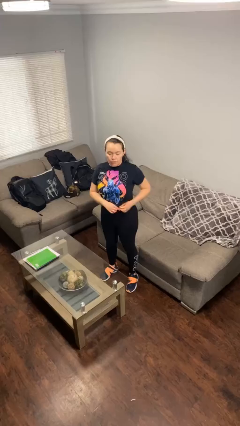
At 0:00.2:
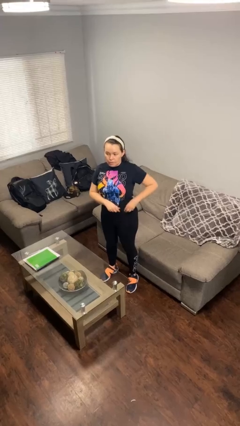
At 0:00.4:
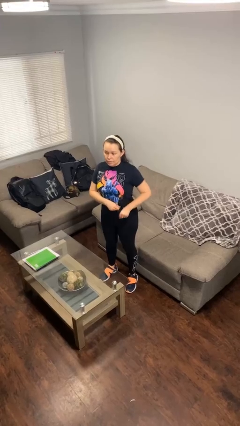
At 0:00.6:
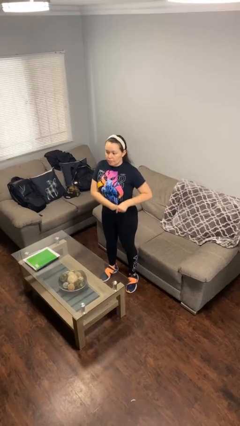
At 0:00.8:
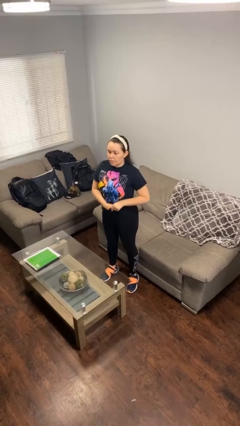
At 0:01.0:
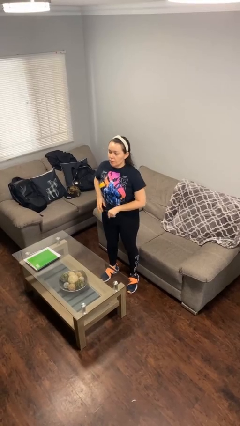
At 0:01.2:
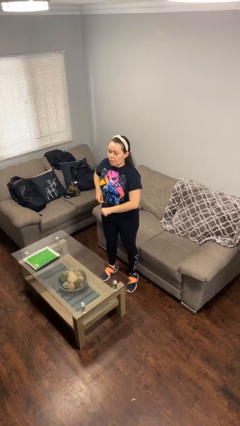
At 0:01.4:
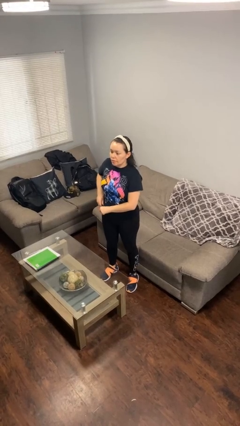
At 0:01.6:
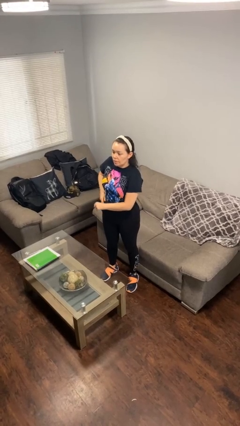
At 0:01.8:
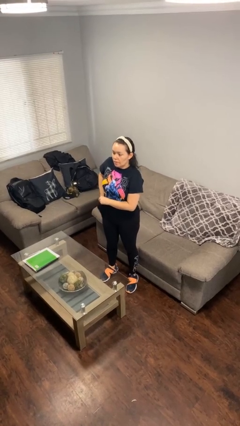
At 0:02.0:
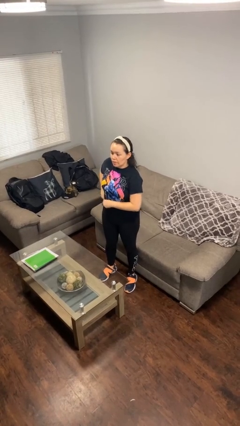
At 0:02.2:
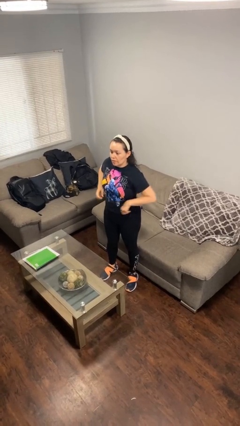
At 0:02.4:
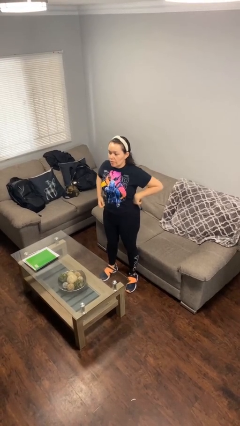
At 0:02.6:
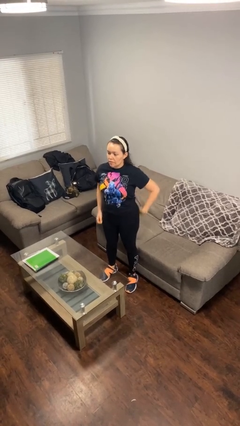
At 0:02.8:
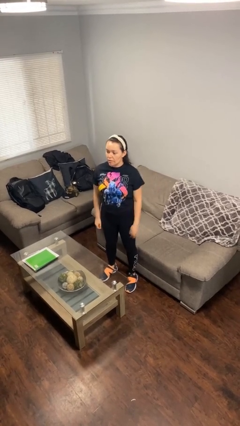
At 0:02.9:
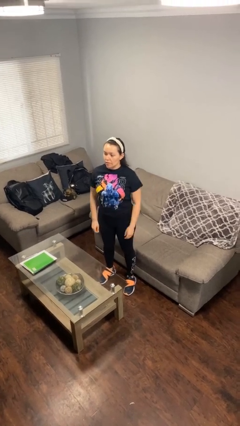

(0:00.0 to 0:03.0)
person tucks in shirt

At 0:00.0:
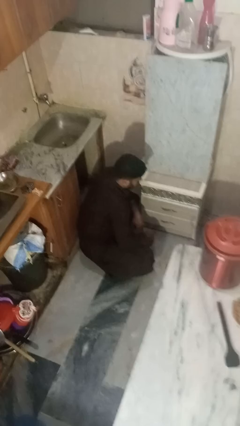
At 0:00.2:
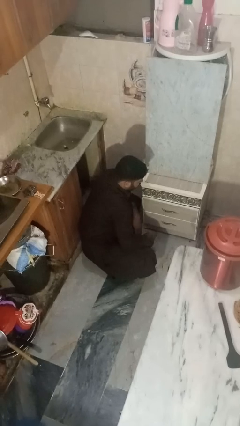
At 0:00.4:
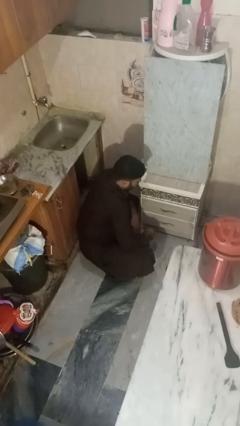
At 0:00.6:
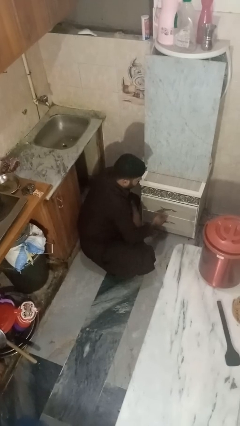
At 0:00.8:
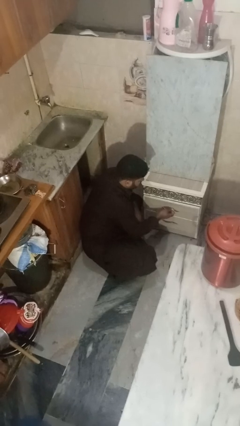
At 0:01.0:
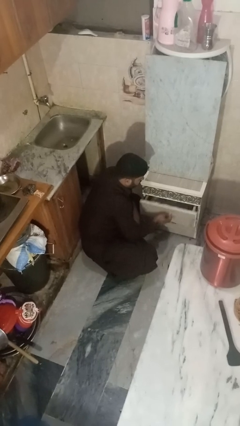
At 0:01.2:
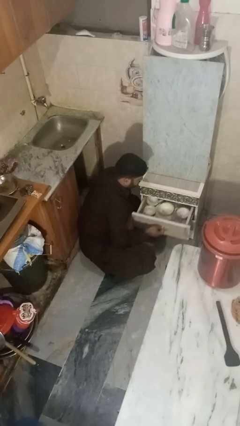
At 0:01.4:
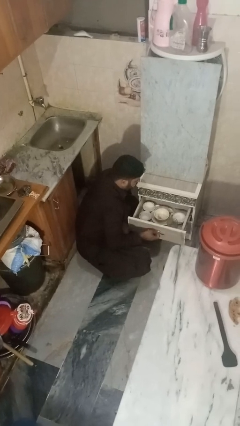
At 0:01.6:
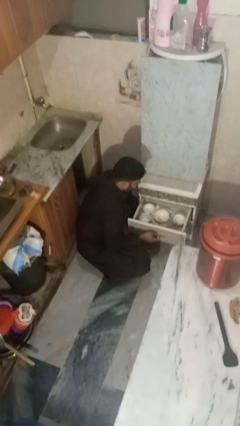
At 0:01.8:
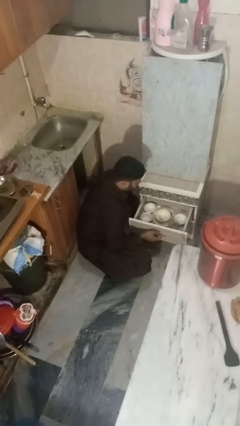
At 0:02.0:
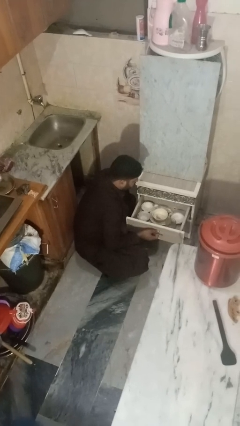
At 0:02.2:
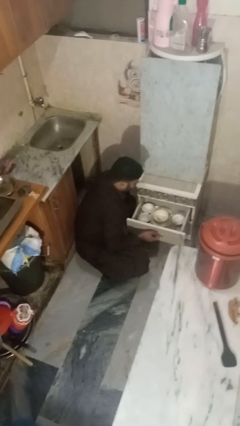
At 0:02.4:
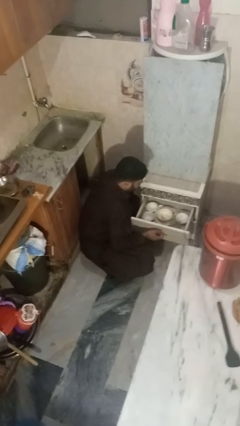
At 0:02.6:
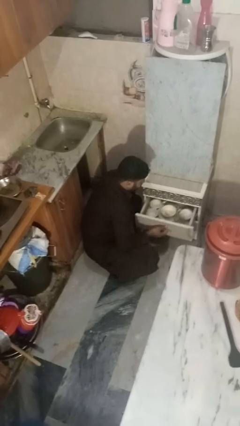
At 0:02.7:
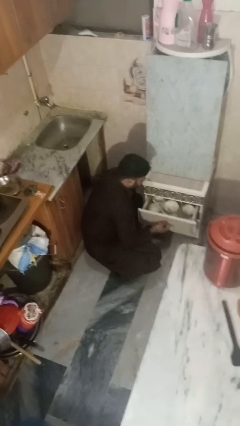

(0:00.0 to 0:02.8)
person opens kitchen drawer

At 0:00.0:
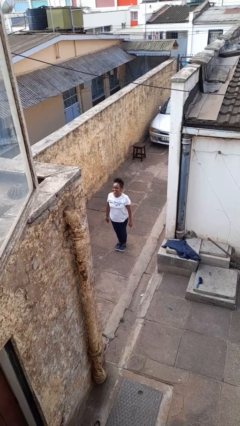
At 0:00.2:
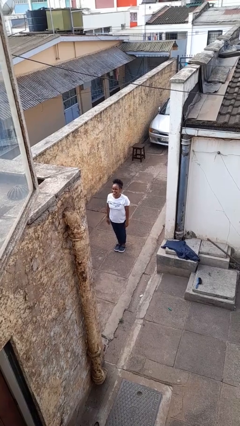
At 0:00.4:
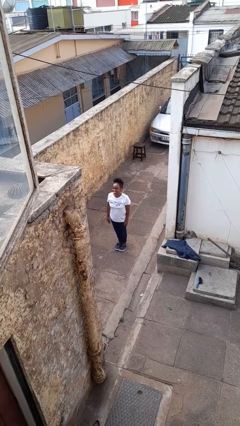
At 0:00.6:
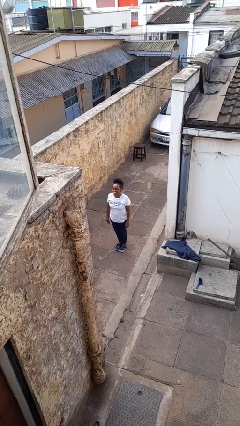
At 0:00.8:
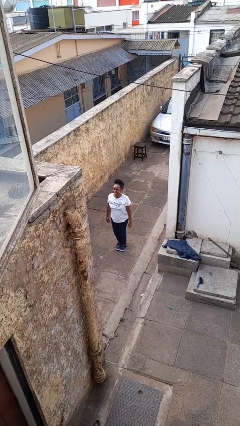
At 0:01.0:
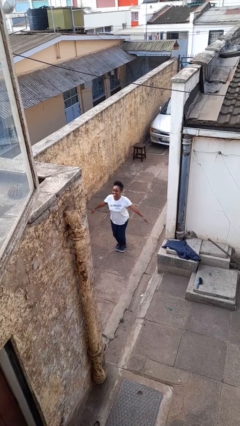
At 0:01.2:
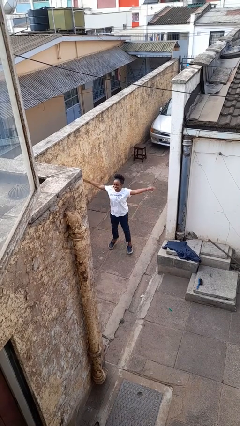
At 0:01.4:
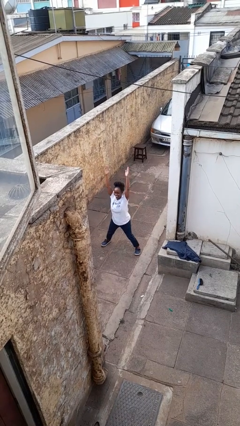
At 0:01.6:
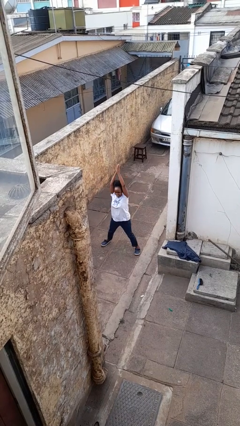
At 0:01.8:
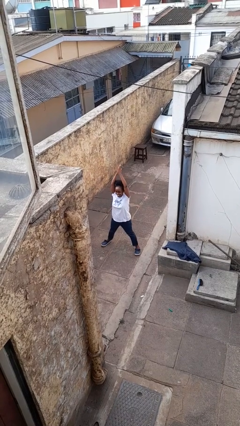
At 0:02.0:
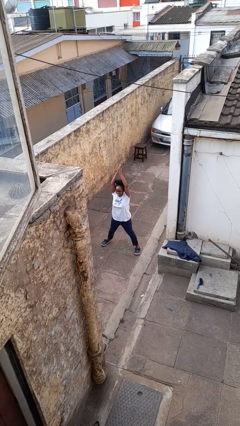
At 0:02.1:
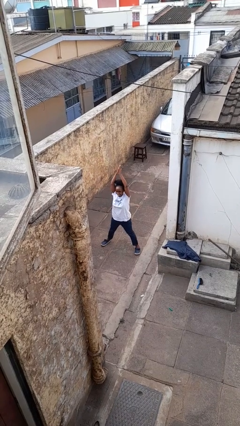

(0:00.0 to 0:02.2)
person exercises with jumping jacks

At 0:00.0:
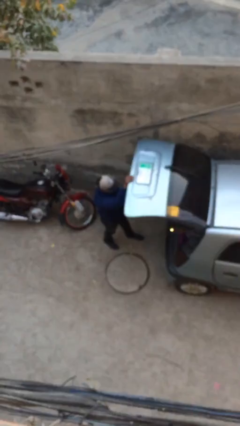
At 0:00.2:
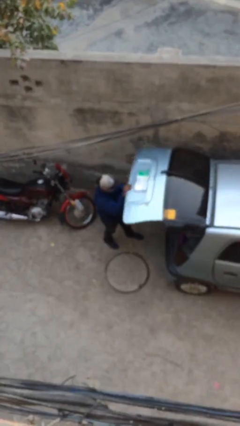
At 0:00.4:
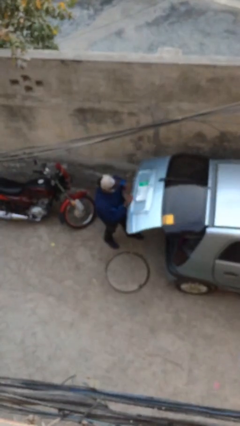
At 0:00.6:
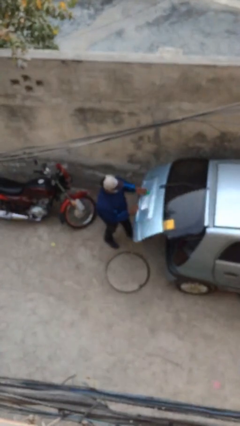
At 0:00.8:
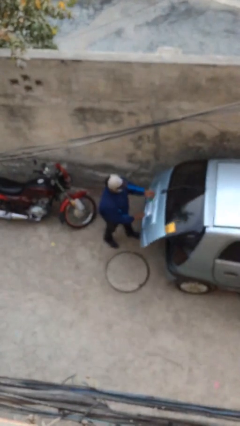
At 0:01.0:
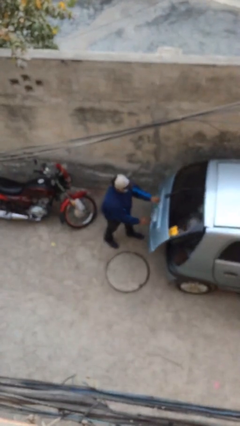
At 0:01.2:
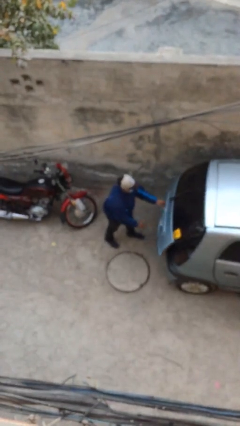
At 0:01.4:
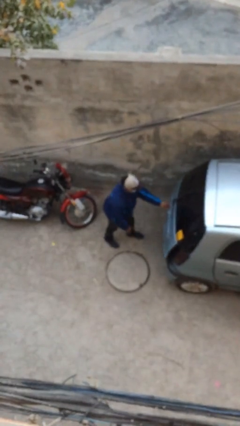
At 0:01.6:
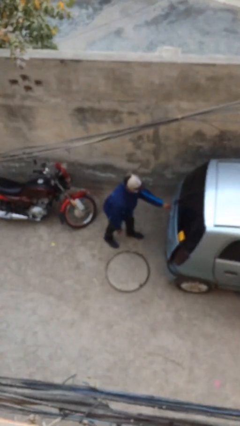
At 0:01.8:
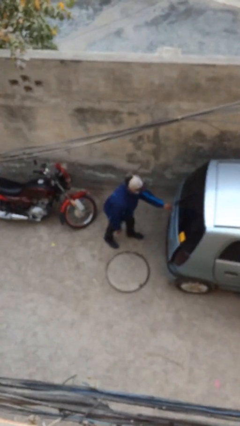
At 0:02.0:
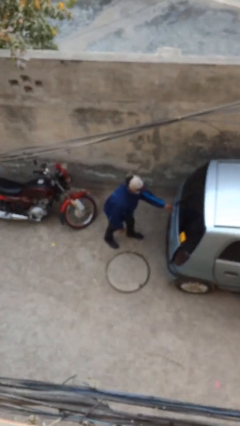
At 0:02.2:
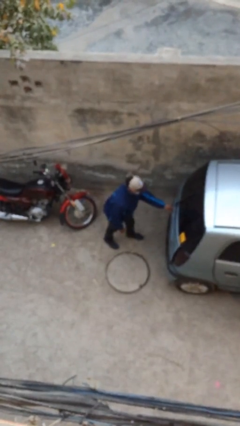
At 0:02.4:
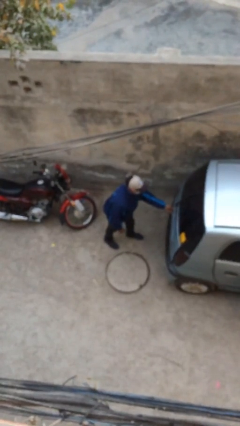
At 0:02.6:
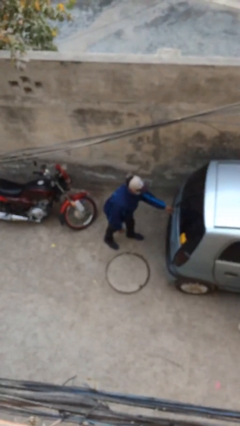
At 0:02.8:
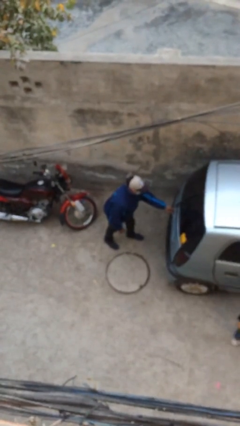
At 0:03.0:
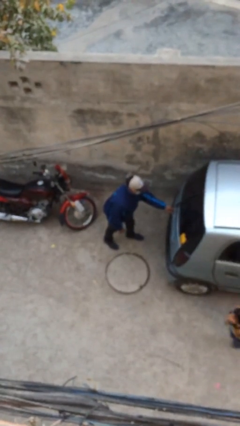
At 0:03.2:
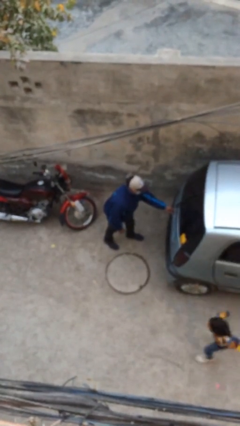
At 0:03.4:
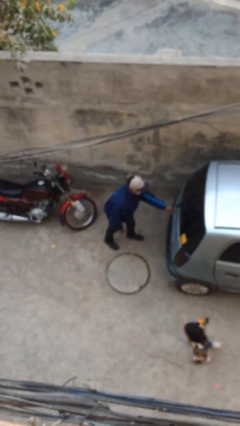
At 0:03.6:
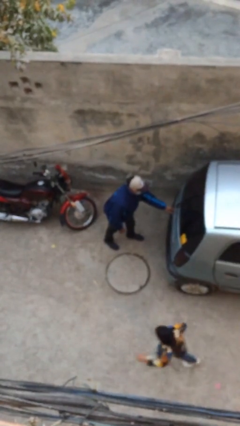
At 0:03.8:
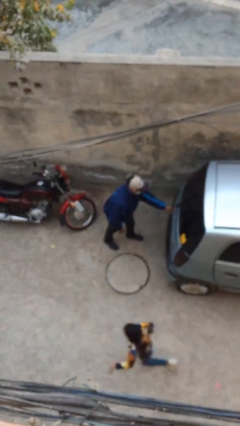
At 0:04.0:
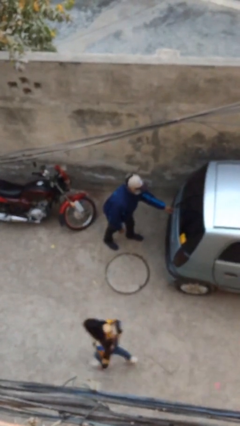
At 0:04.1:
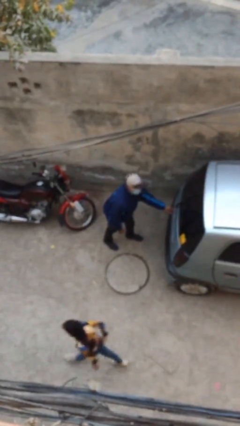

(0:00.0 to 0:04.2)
person closes car trunk

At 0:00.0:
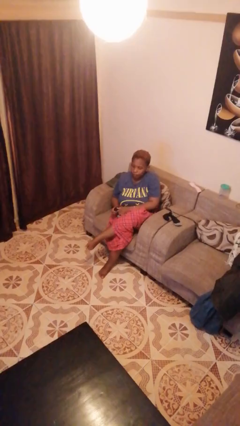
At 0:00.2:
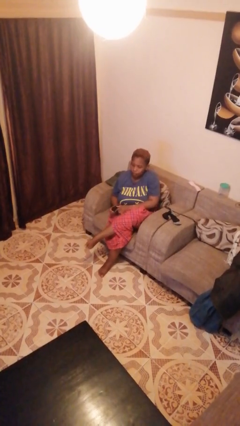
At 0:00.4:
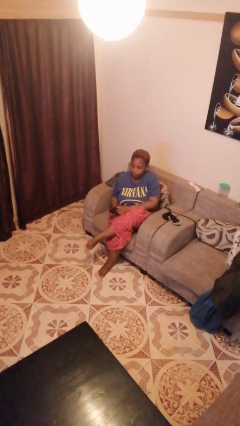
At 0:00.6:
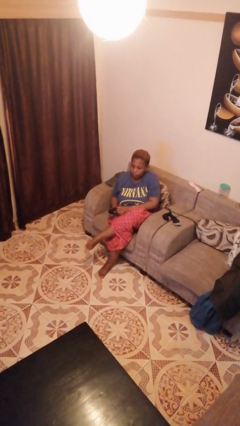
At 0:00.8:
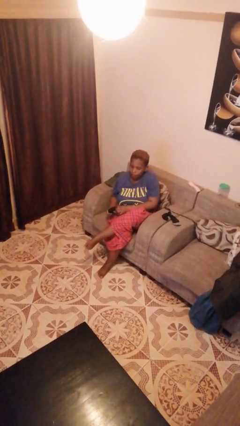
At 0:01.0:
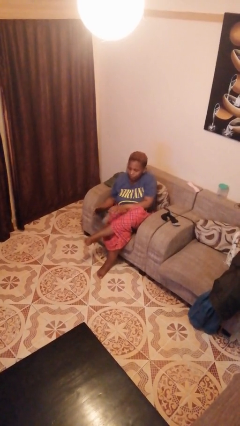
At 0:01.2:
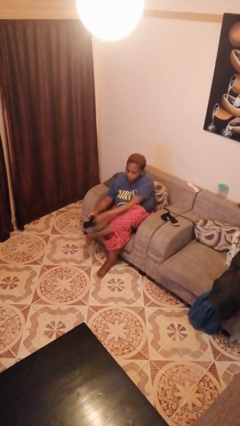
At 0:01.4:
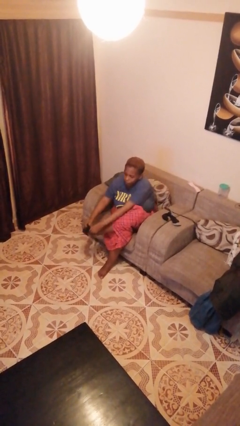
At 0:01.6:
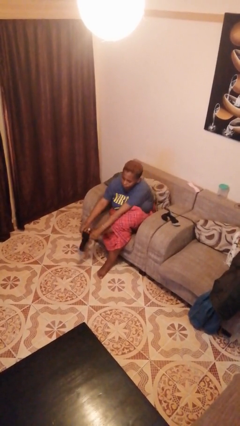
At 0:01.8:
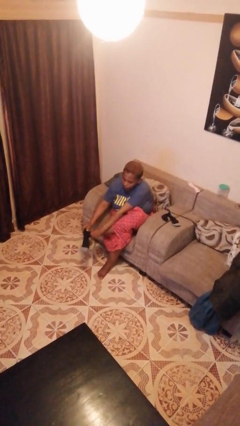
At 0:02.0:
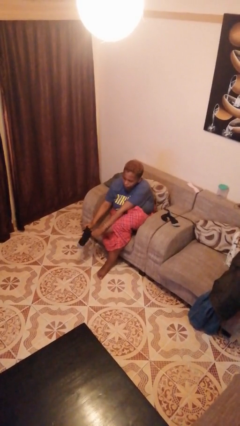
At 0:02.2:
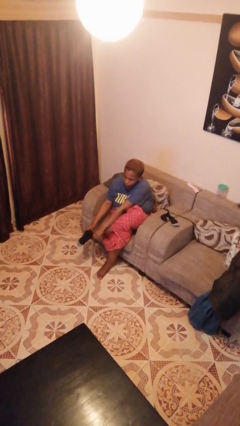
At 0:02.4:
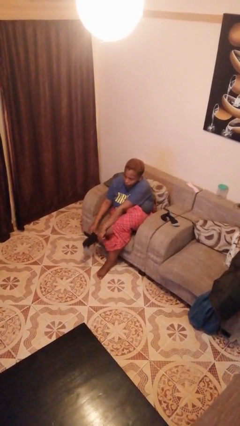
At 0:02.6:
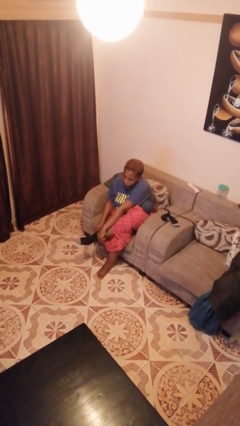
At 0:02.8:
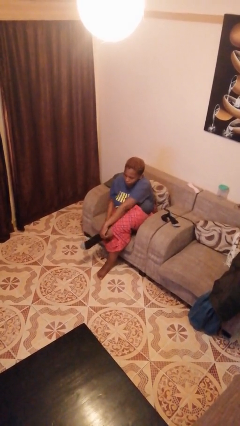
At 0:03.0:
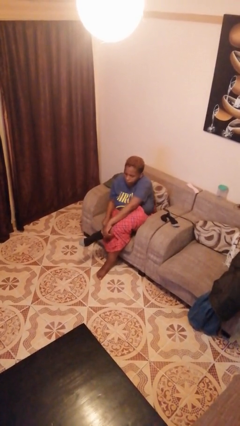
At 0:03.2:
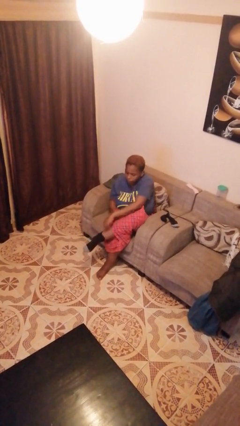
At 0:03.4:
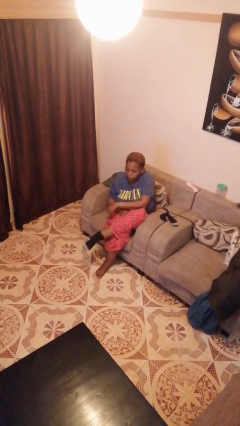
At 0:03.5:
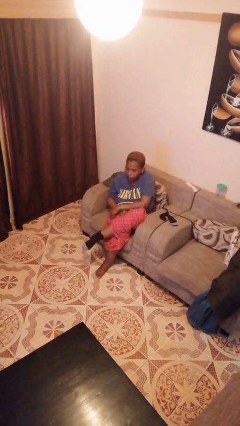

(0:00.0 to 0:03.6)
person puts on socks

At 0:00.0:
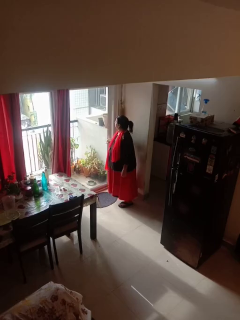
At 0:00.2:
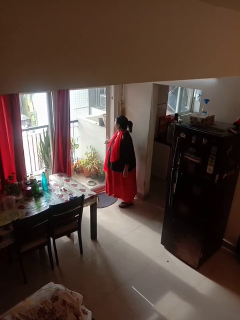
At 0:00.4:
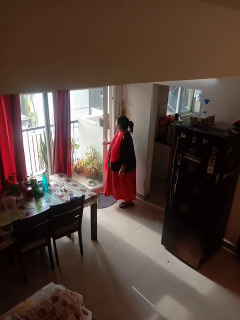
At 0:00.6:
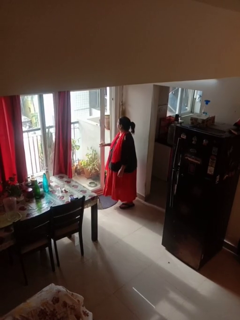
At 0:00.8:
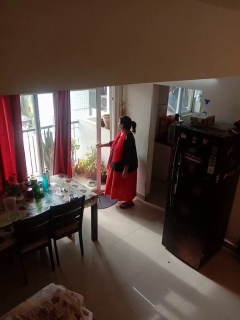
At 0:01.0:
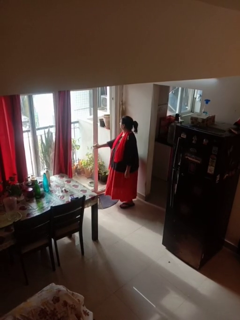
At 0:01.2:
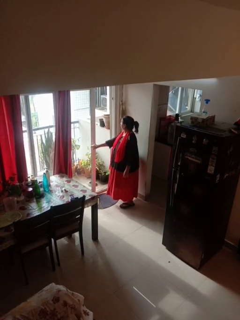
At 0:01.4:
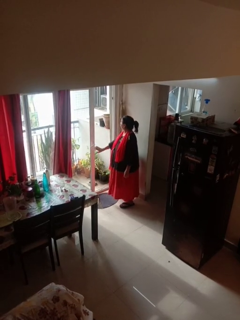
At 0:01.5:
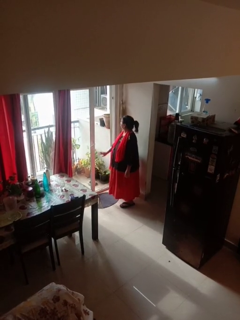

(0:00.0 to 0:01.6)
person opens home window
